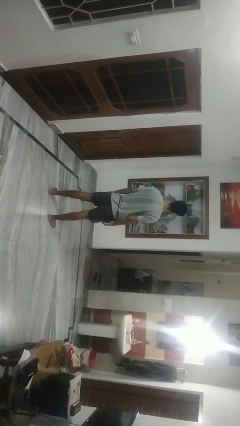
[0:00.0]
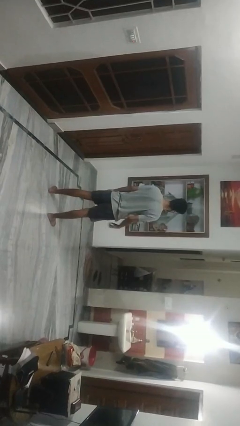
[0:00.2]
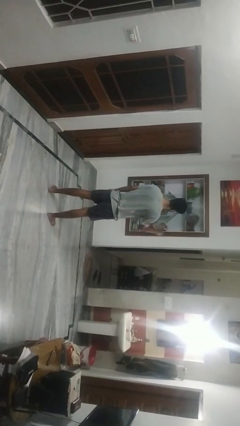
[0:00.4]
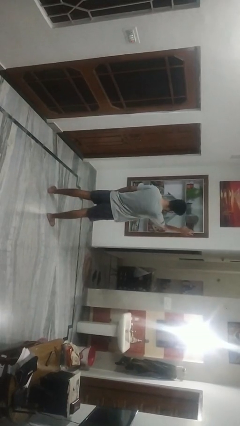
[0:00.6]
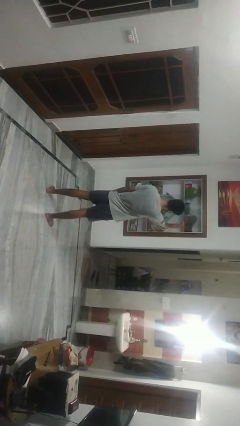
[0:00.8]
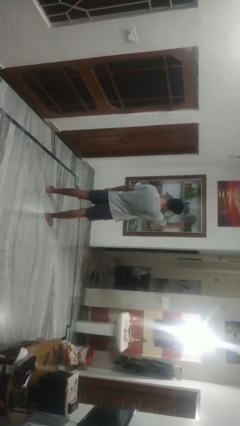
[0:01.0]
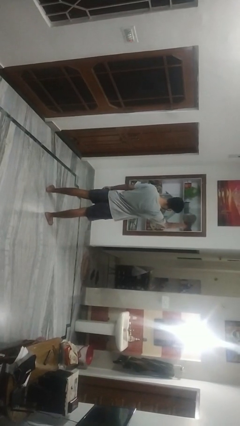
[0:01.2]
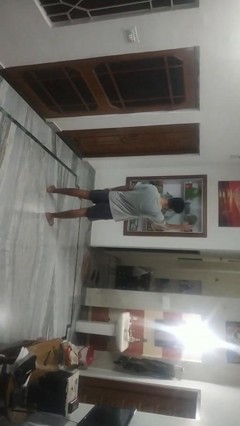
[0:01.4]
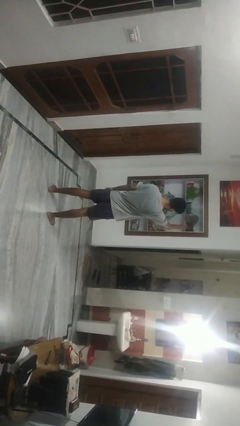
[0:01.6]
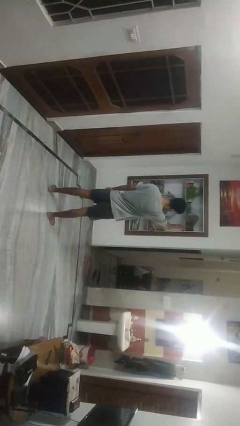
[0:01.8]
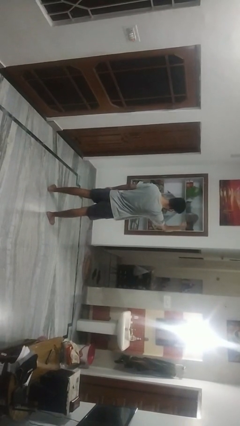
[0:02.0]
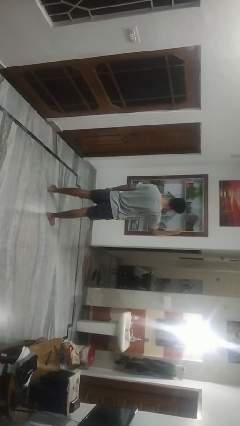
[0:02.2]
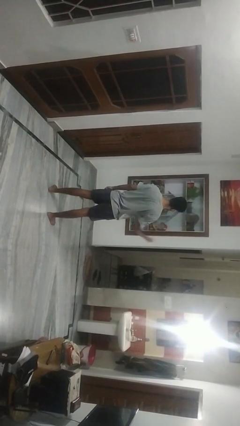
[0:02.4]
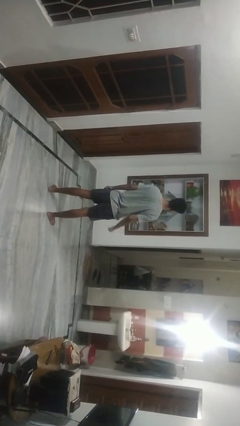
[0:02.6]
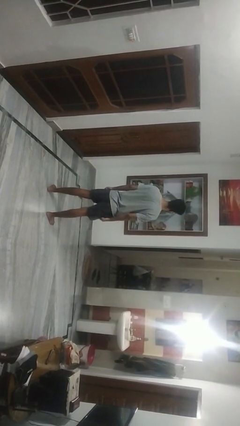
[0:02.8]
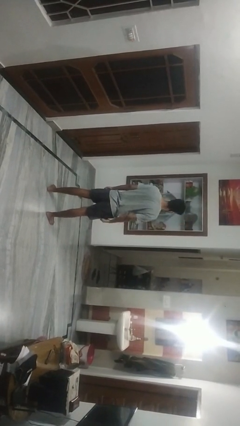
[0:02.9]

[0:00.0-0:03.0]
person gestures come here

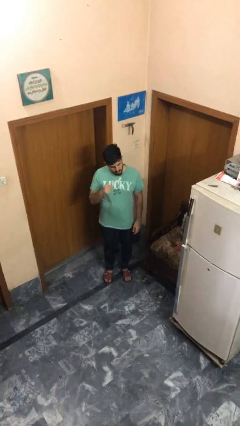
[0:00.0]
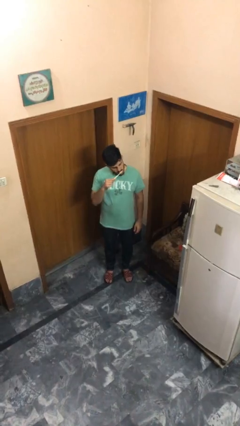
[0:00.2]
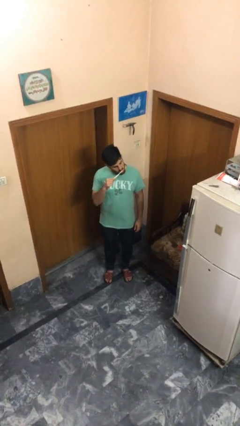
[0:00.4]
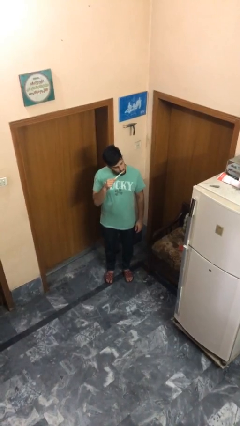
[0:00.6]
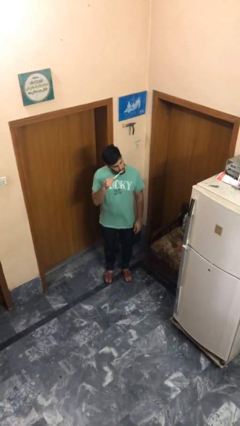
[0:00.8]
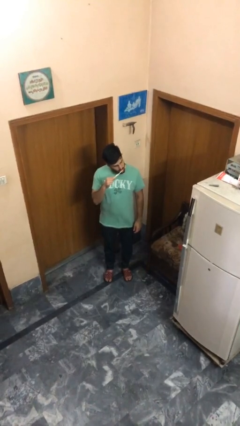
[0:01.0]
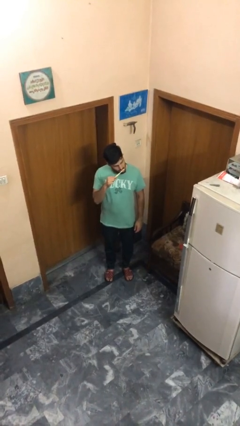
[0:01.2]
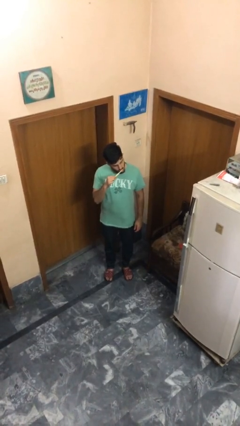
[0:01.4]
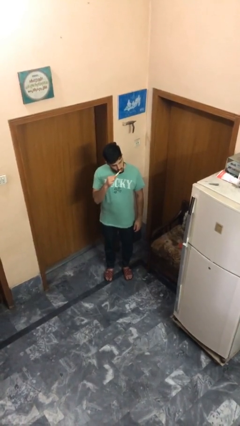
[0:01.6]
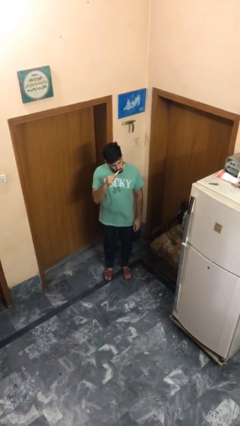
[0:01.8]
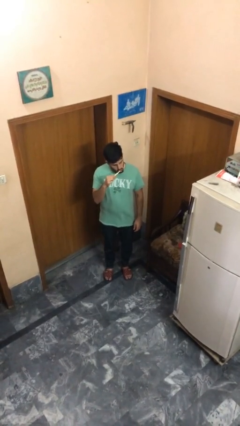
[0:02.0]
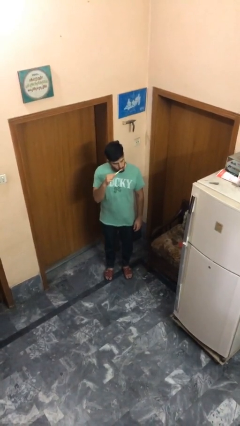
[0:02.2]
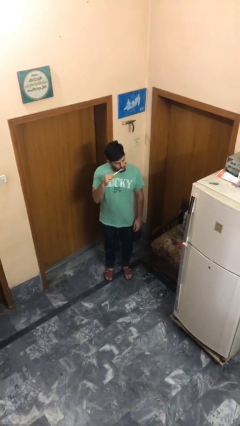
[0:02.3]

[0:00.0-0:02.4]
person brushes teeth

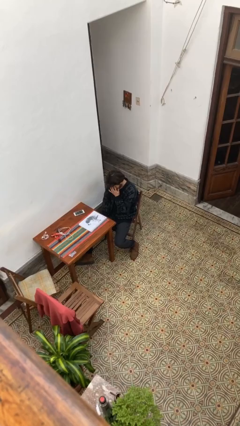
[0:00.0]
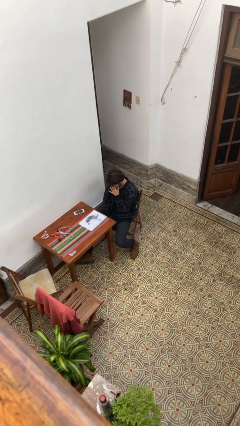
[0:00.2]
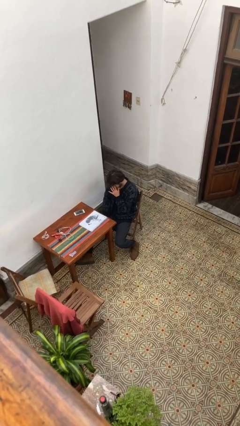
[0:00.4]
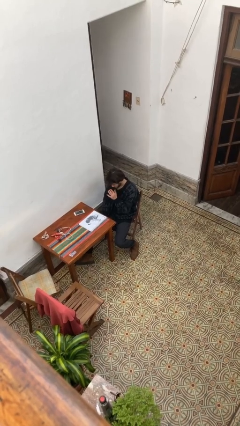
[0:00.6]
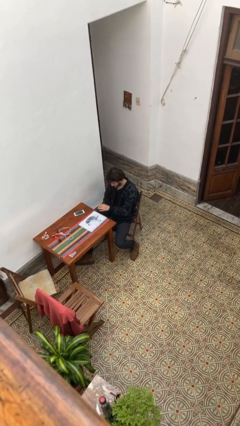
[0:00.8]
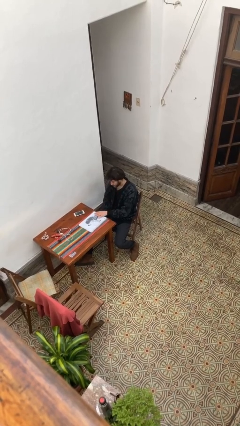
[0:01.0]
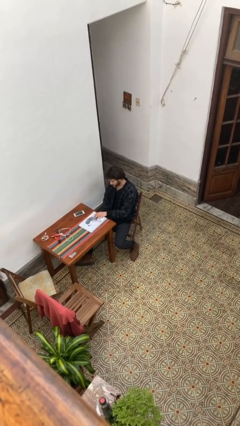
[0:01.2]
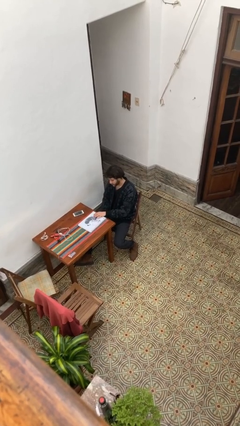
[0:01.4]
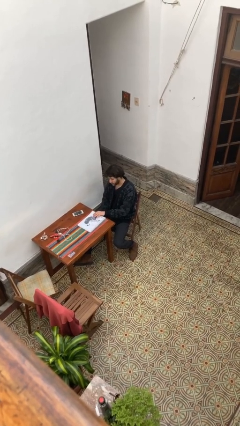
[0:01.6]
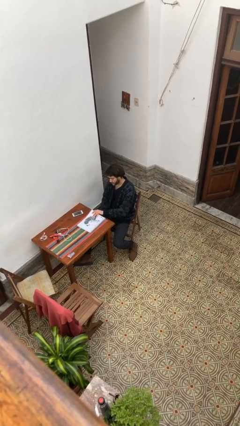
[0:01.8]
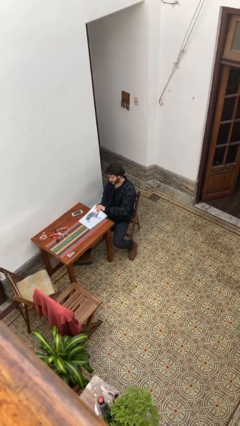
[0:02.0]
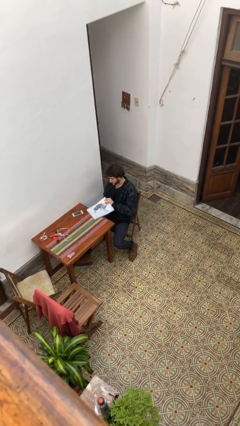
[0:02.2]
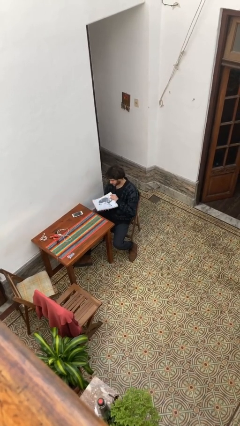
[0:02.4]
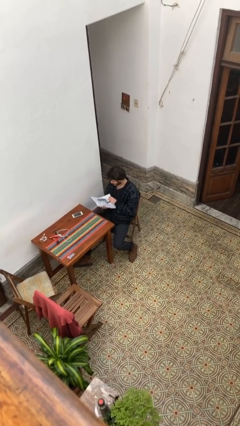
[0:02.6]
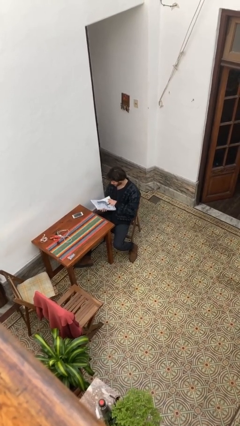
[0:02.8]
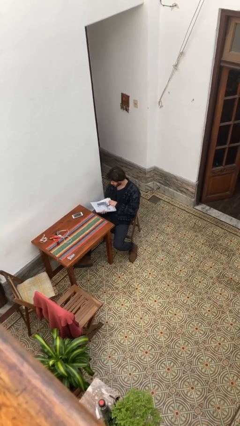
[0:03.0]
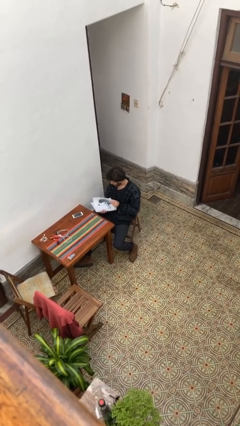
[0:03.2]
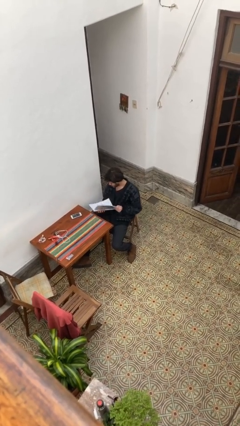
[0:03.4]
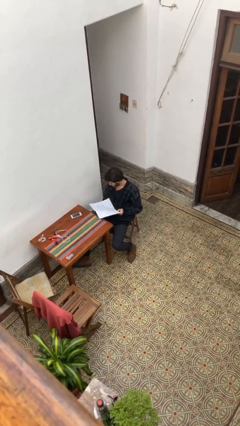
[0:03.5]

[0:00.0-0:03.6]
person picks up object from table

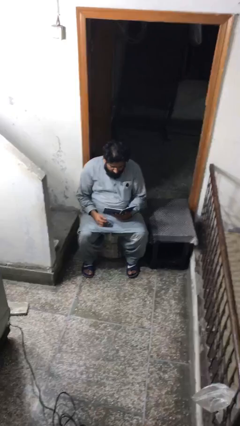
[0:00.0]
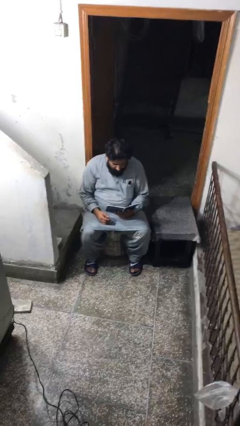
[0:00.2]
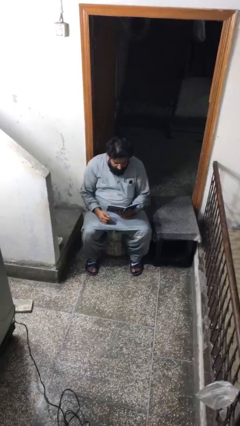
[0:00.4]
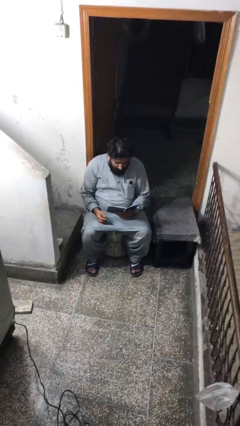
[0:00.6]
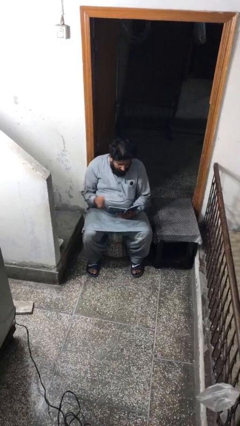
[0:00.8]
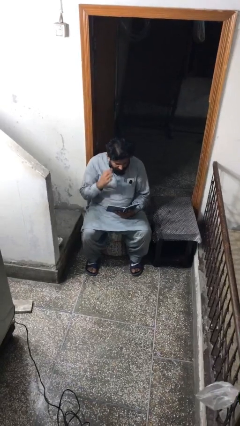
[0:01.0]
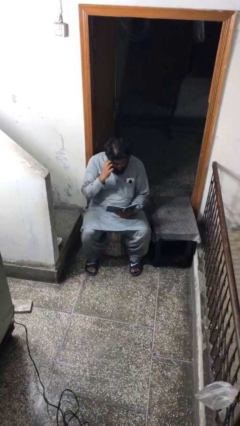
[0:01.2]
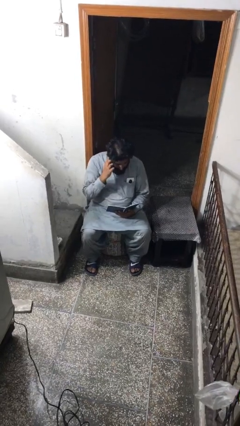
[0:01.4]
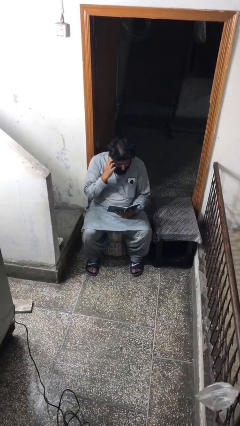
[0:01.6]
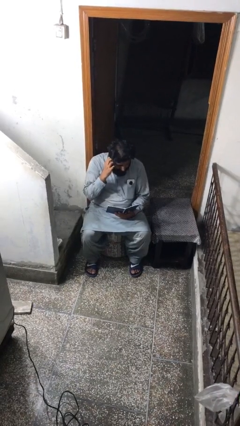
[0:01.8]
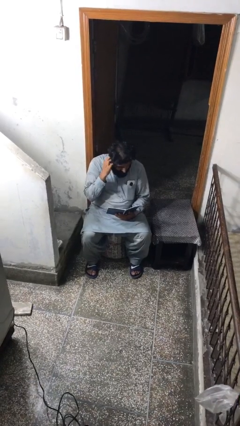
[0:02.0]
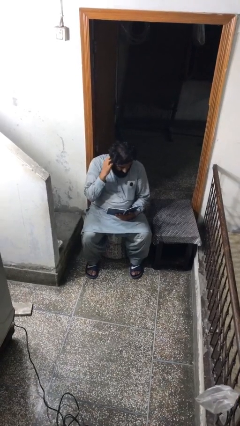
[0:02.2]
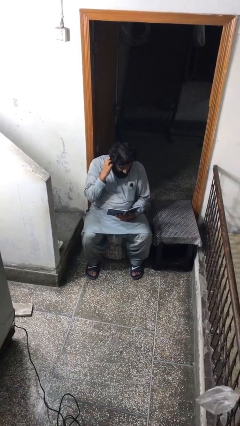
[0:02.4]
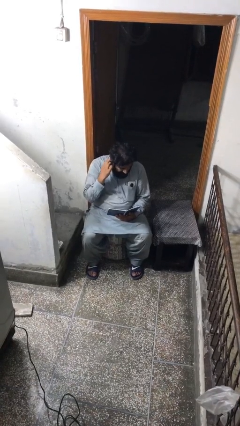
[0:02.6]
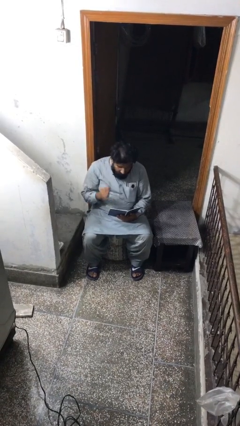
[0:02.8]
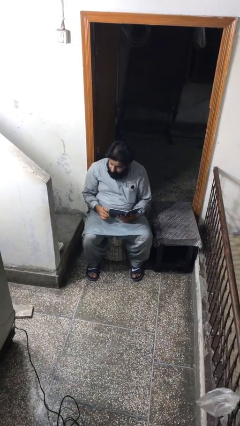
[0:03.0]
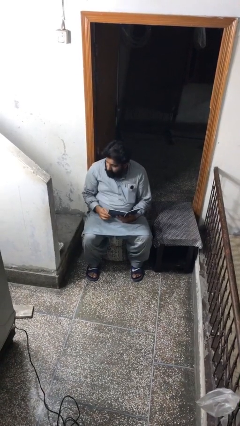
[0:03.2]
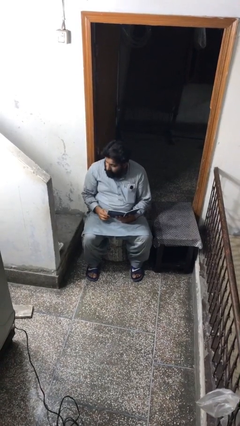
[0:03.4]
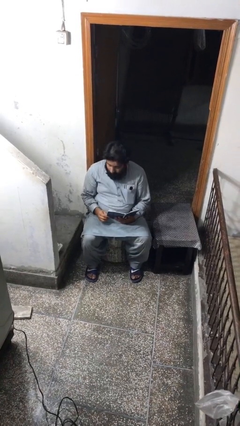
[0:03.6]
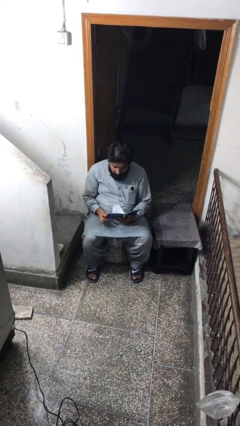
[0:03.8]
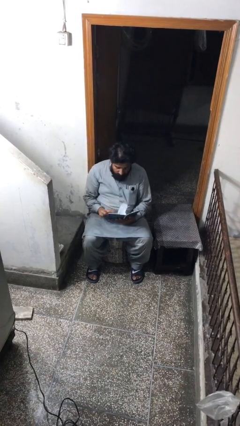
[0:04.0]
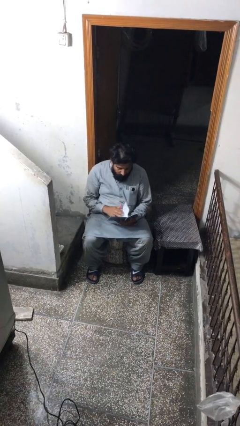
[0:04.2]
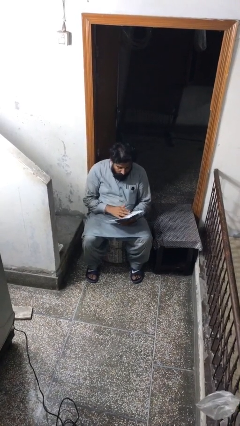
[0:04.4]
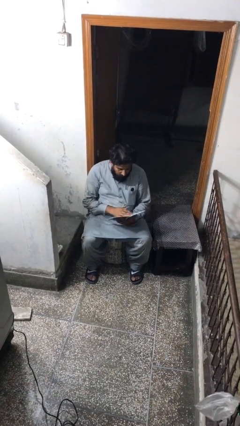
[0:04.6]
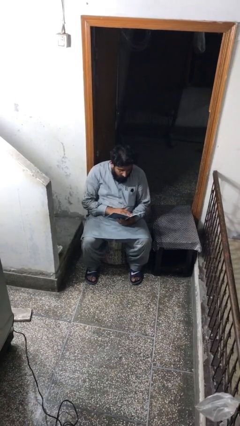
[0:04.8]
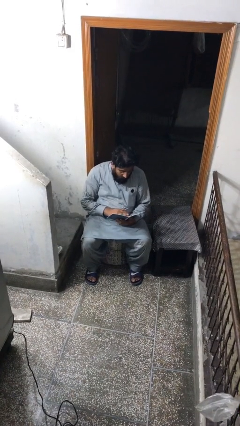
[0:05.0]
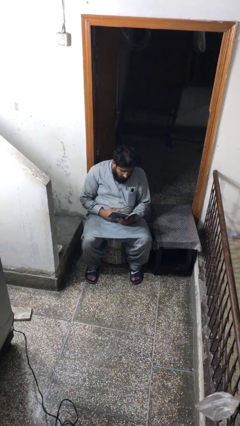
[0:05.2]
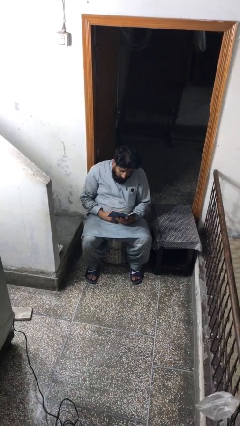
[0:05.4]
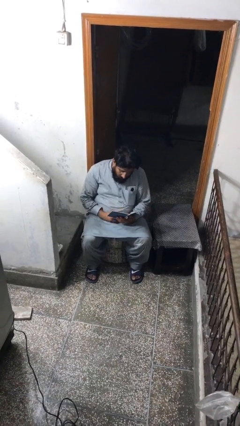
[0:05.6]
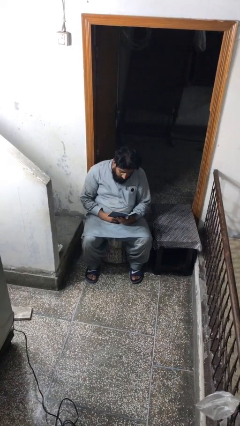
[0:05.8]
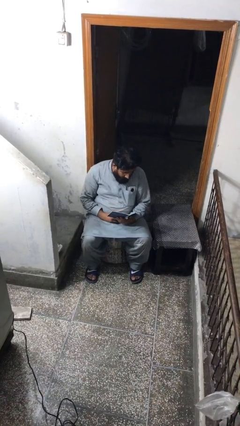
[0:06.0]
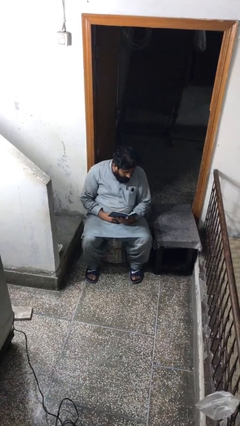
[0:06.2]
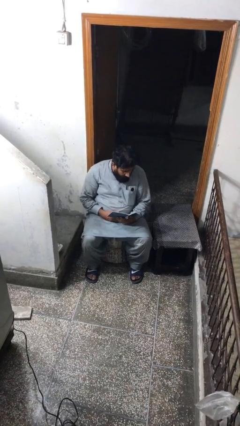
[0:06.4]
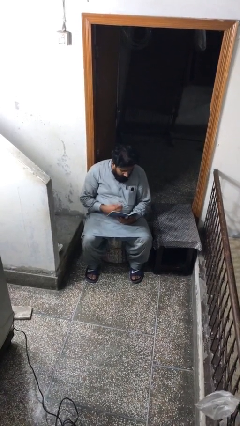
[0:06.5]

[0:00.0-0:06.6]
person reads document

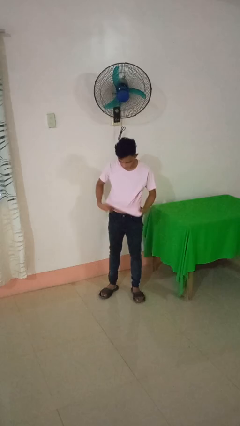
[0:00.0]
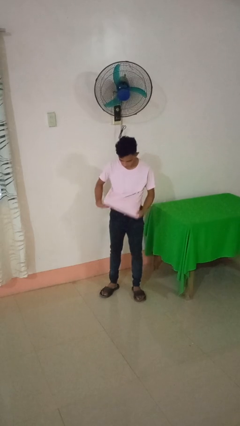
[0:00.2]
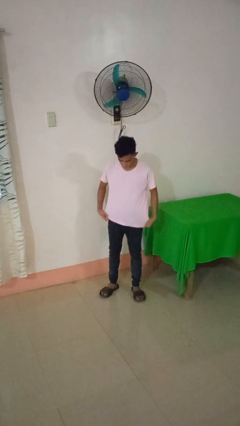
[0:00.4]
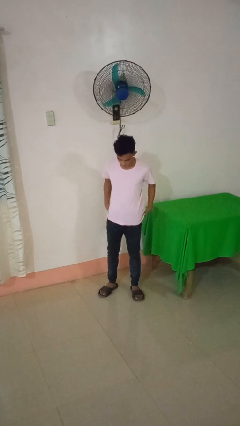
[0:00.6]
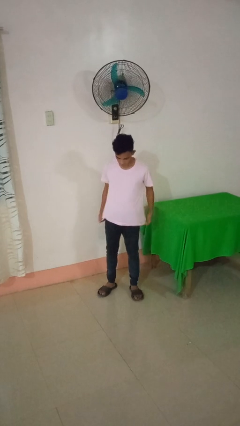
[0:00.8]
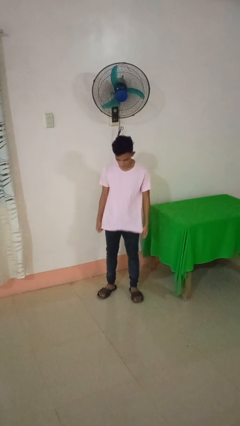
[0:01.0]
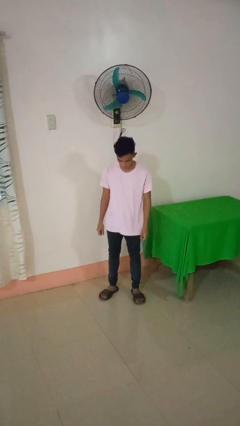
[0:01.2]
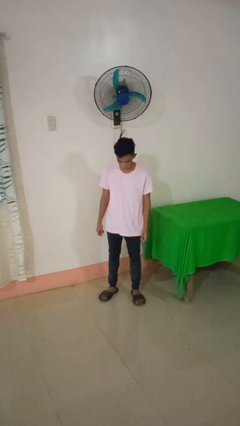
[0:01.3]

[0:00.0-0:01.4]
person untucks shirt

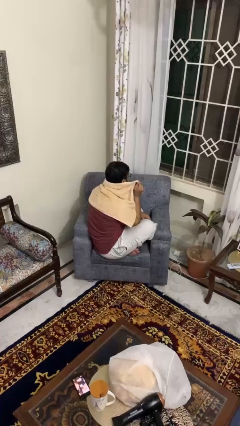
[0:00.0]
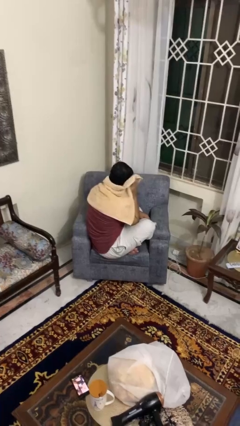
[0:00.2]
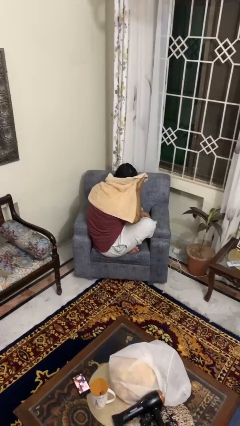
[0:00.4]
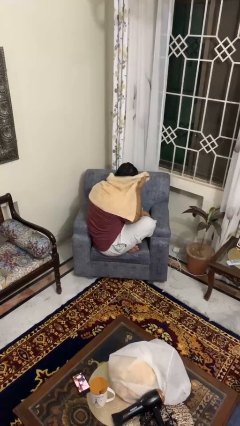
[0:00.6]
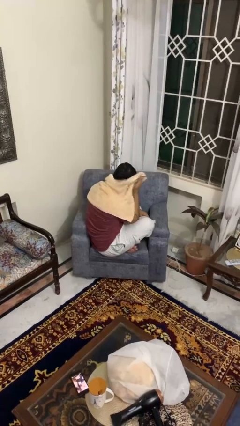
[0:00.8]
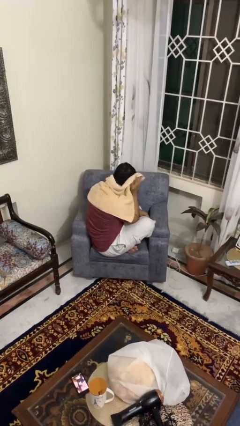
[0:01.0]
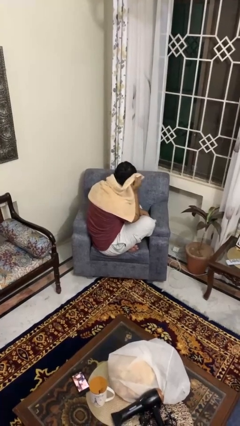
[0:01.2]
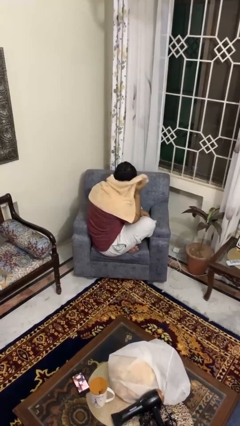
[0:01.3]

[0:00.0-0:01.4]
person dries hair with towel
